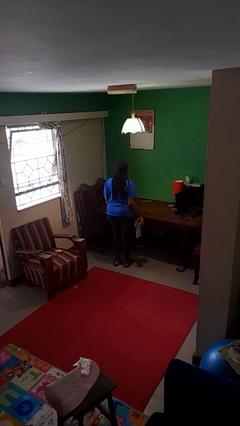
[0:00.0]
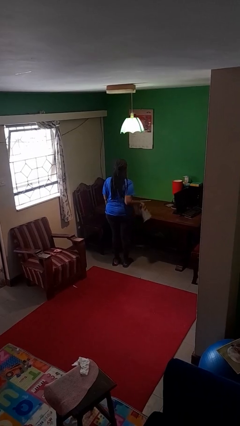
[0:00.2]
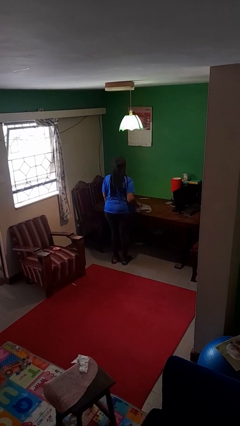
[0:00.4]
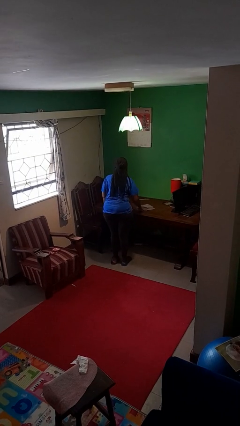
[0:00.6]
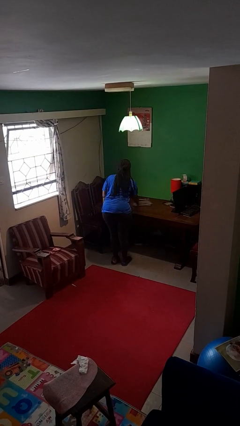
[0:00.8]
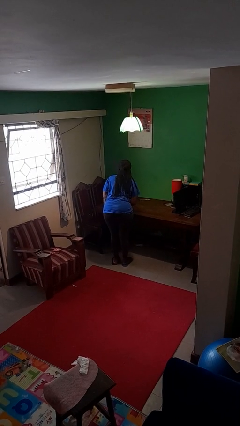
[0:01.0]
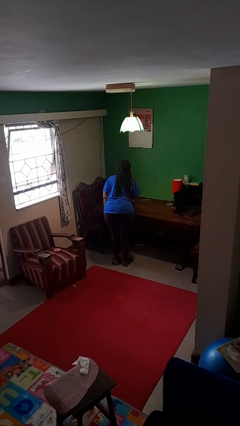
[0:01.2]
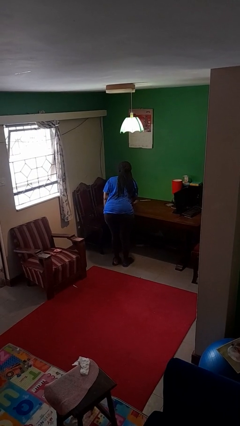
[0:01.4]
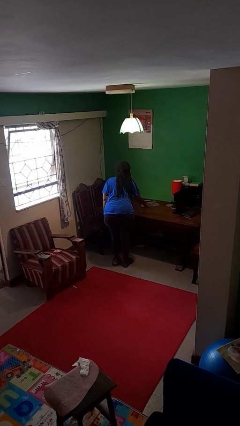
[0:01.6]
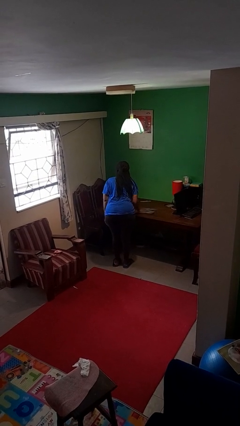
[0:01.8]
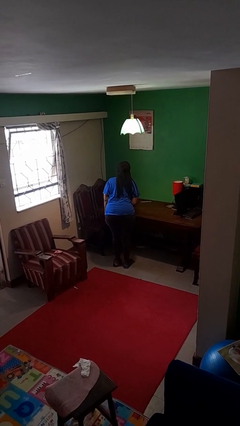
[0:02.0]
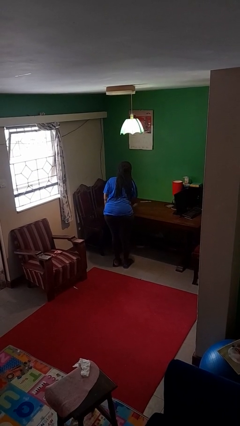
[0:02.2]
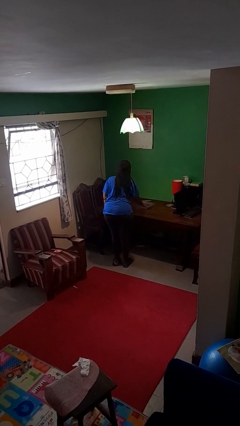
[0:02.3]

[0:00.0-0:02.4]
person cleans table with rag

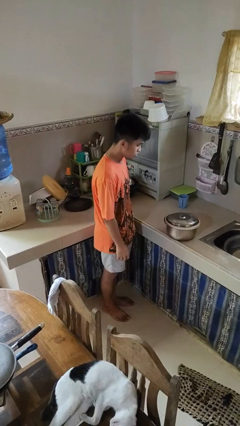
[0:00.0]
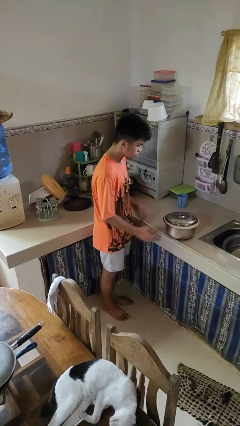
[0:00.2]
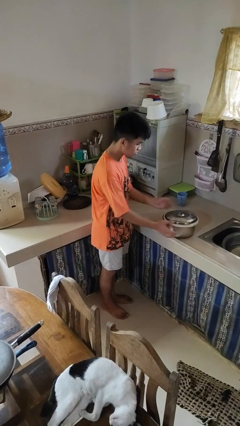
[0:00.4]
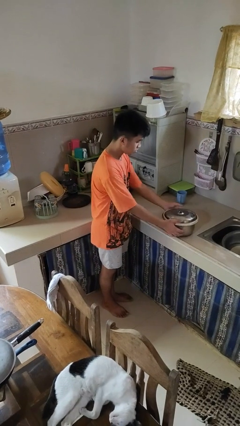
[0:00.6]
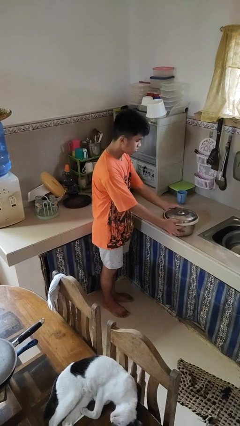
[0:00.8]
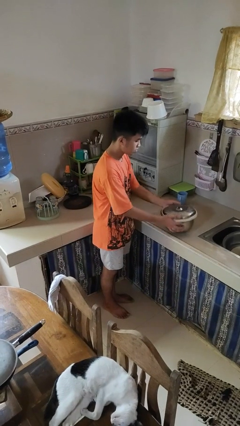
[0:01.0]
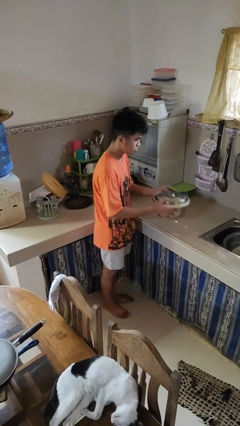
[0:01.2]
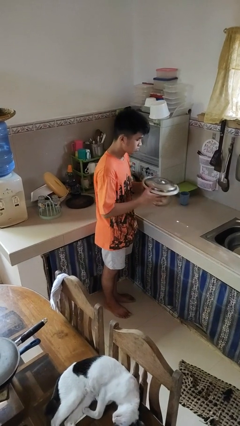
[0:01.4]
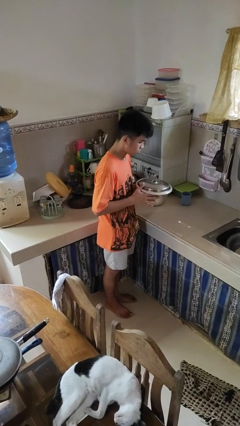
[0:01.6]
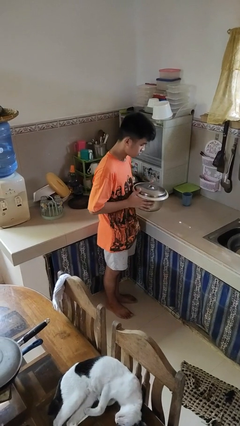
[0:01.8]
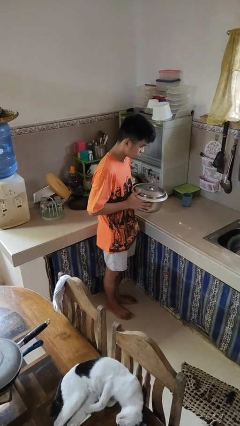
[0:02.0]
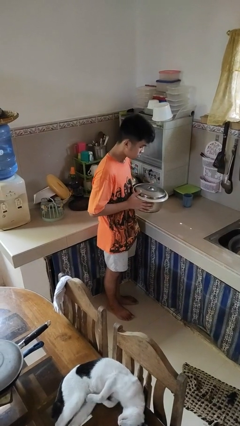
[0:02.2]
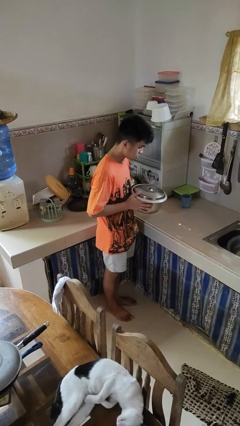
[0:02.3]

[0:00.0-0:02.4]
person picks up object from countertop

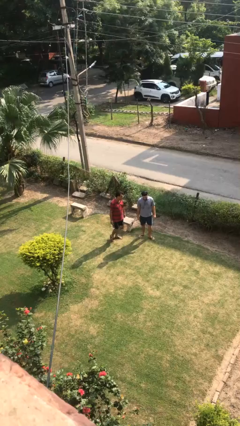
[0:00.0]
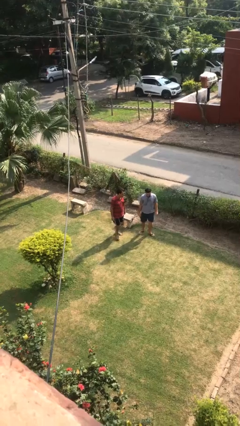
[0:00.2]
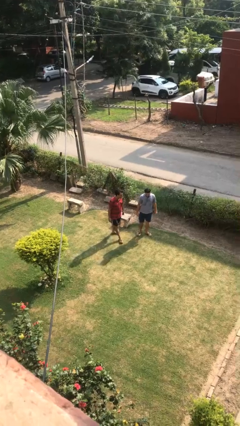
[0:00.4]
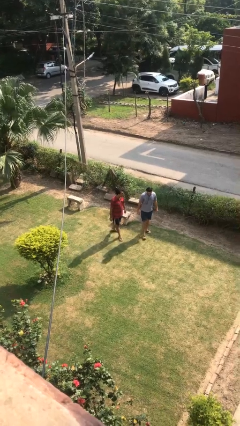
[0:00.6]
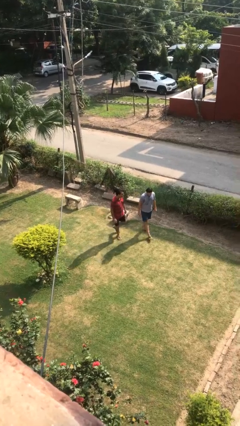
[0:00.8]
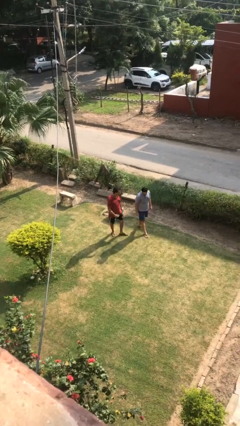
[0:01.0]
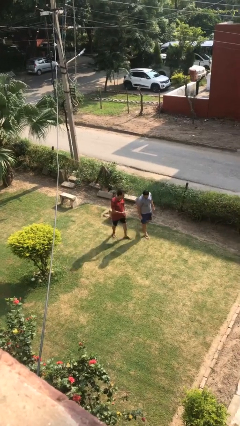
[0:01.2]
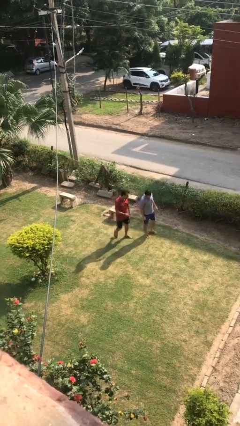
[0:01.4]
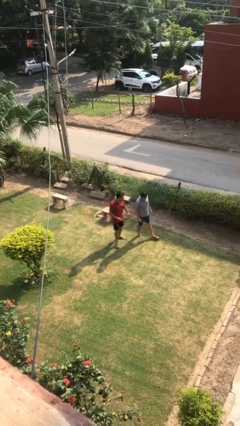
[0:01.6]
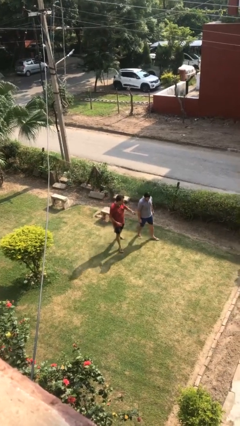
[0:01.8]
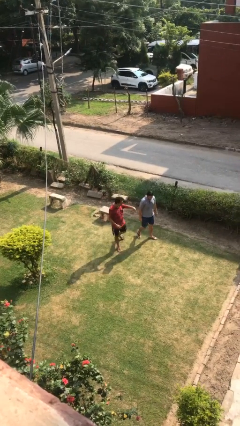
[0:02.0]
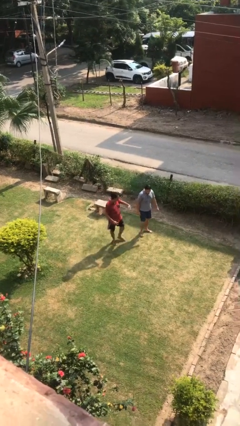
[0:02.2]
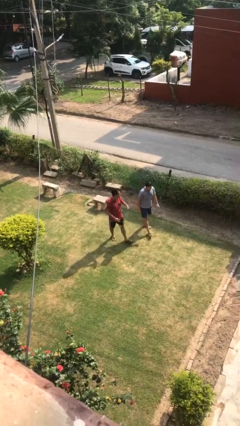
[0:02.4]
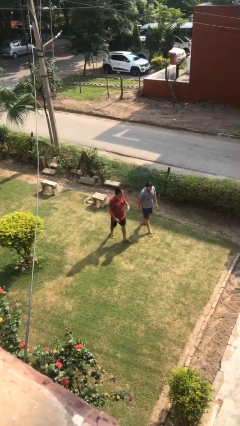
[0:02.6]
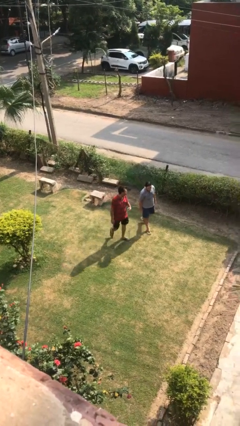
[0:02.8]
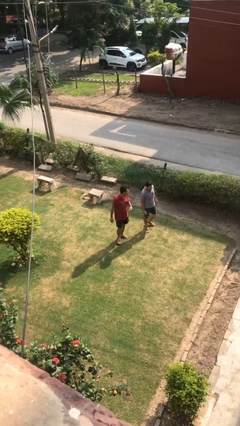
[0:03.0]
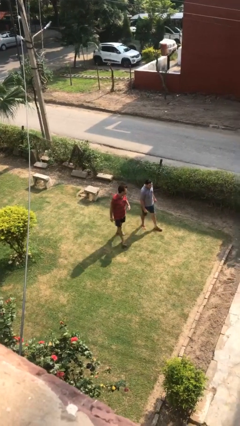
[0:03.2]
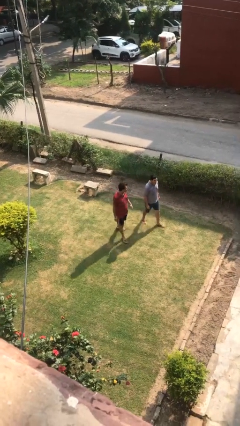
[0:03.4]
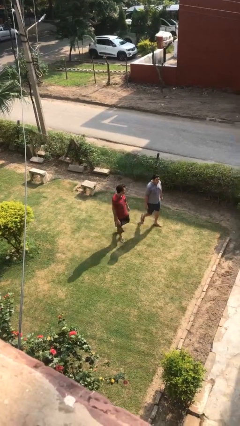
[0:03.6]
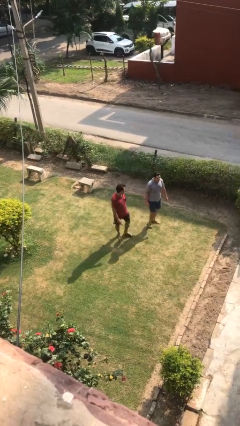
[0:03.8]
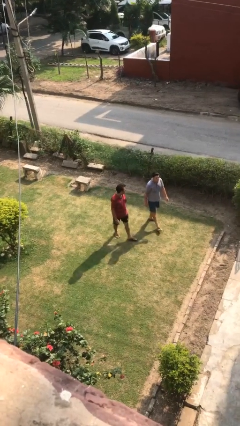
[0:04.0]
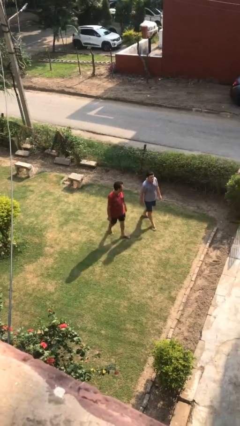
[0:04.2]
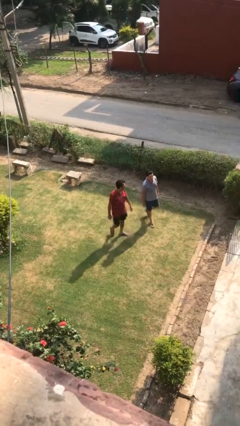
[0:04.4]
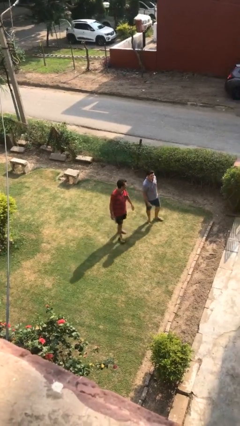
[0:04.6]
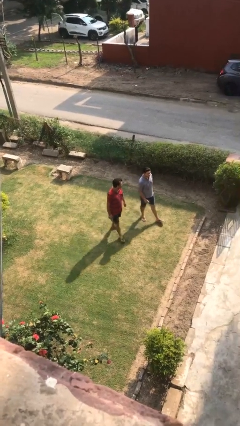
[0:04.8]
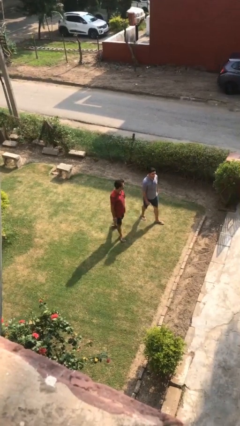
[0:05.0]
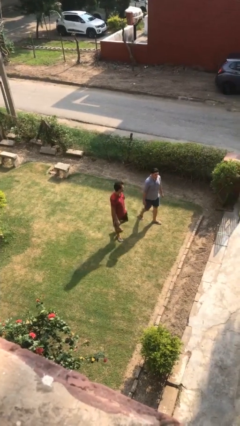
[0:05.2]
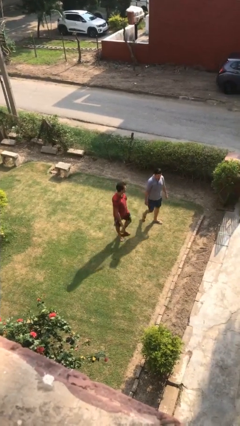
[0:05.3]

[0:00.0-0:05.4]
person talks to person

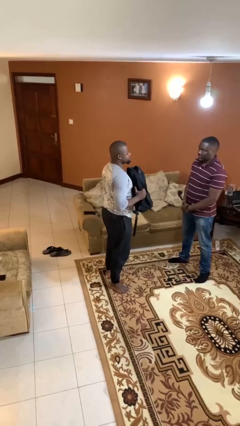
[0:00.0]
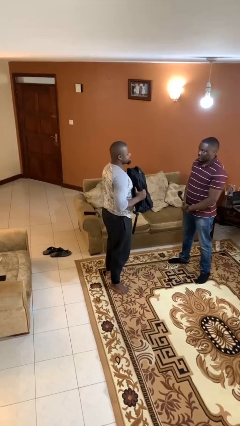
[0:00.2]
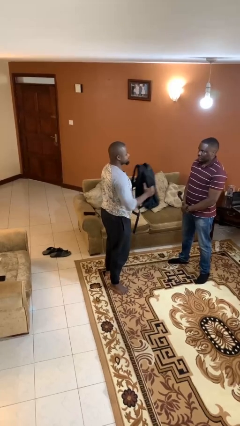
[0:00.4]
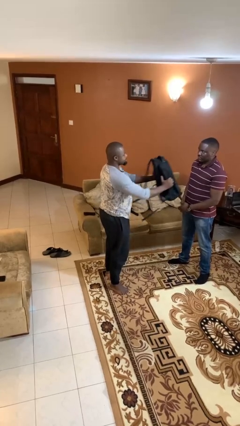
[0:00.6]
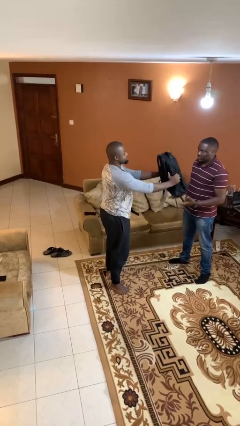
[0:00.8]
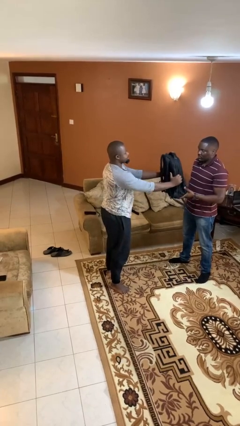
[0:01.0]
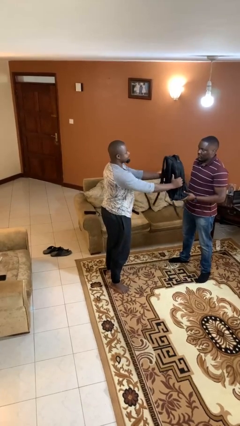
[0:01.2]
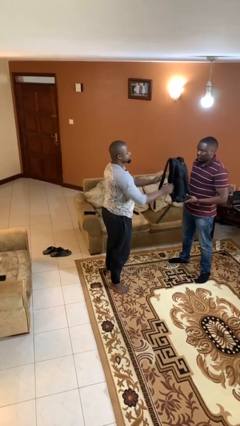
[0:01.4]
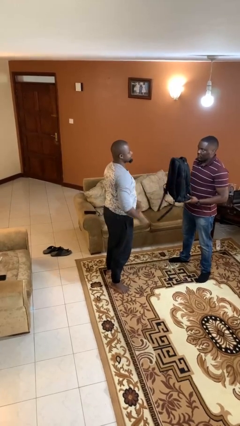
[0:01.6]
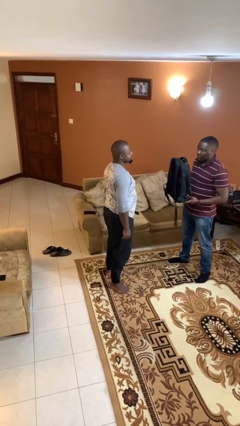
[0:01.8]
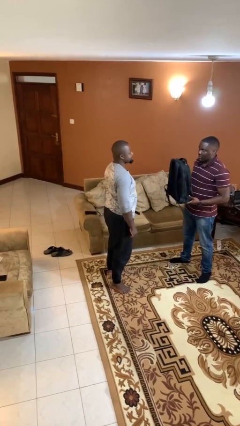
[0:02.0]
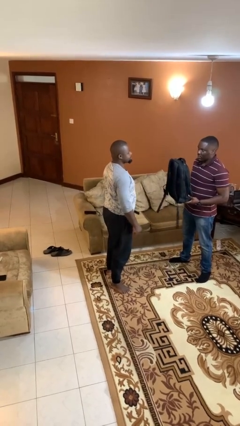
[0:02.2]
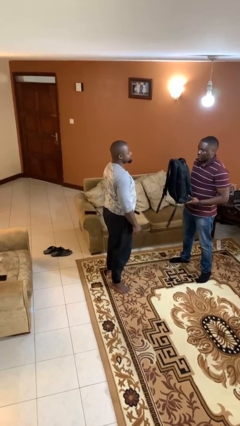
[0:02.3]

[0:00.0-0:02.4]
person transfers object to person

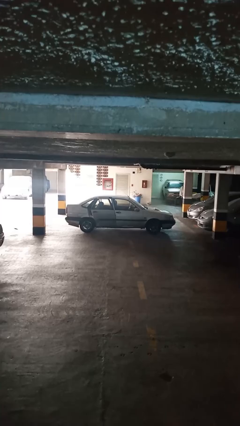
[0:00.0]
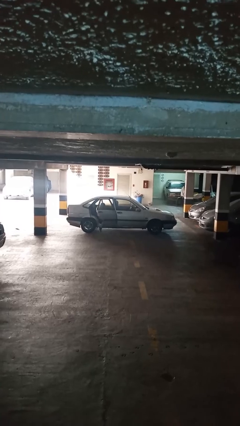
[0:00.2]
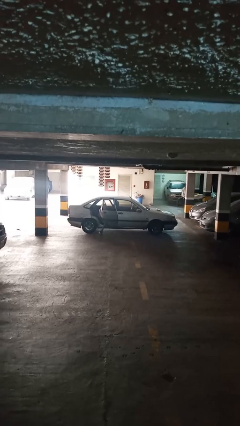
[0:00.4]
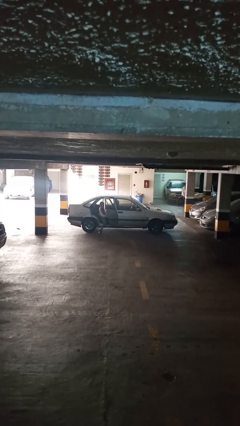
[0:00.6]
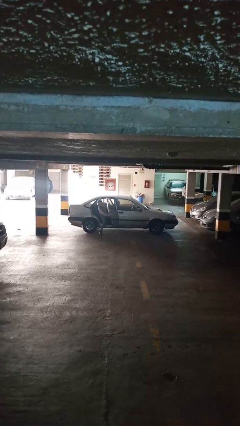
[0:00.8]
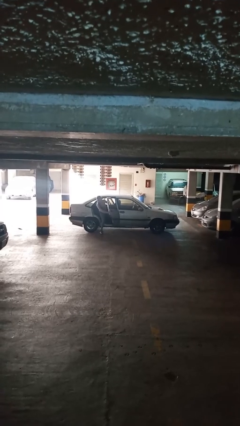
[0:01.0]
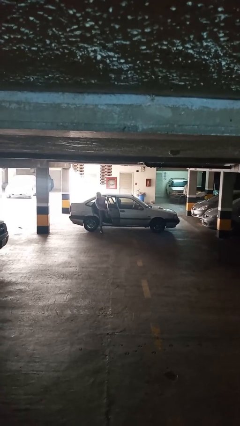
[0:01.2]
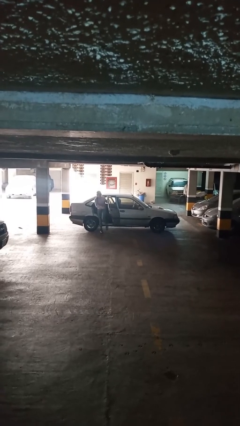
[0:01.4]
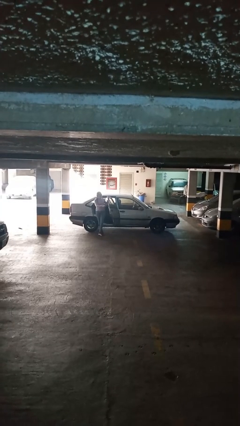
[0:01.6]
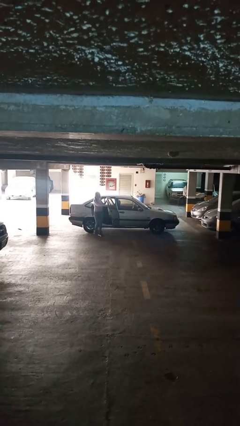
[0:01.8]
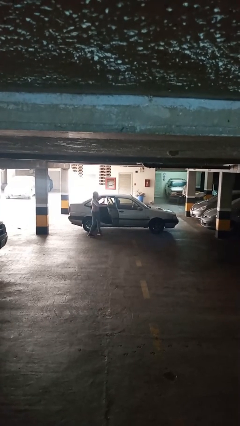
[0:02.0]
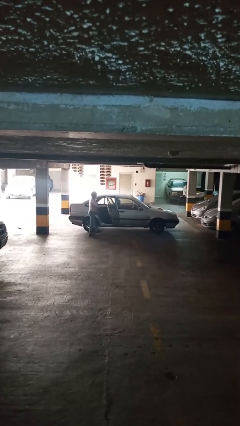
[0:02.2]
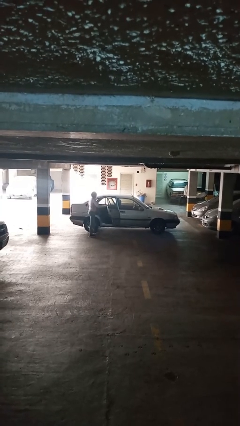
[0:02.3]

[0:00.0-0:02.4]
car drops off person

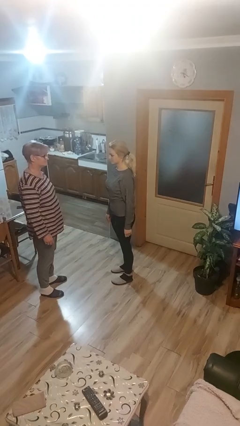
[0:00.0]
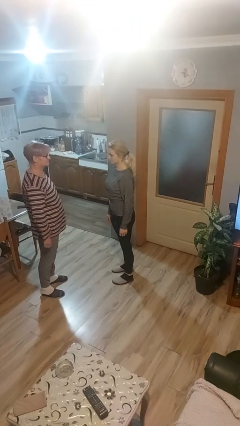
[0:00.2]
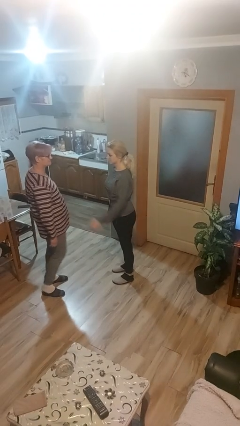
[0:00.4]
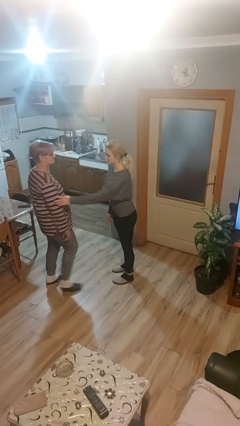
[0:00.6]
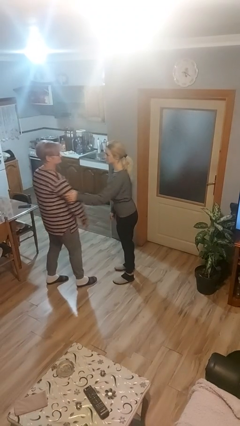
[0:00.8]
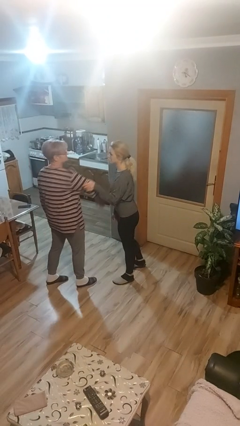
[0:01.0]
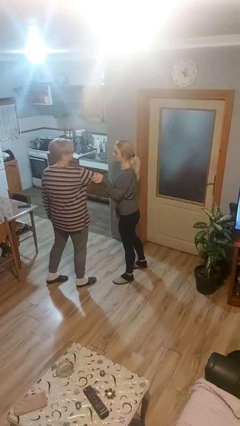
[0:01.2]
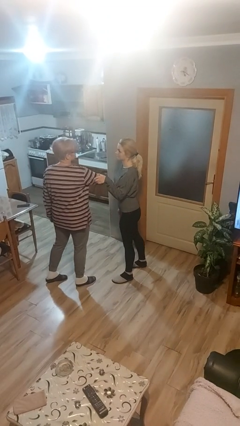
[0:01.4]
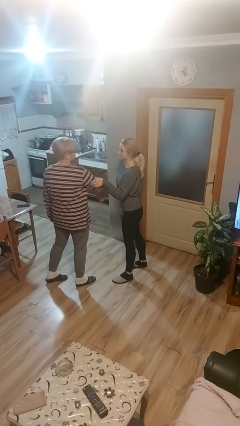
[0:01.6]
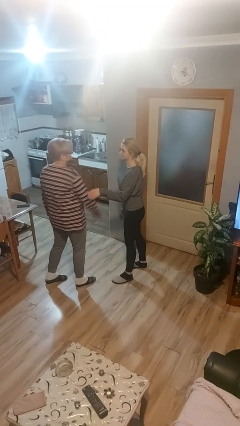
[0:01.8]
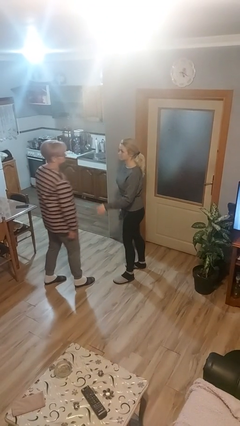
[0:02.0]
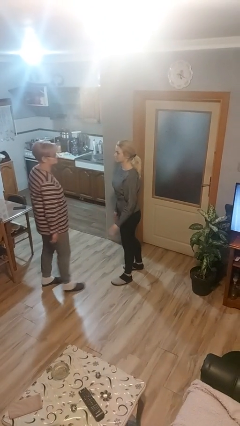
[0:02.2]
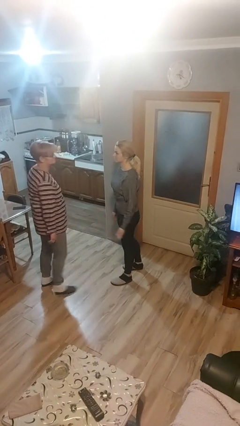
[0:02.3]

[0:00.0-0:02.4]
person grabs person by bicep
